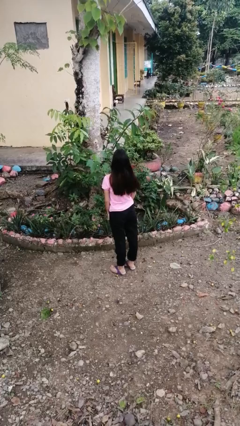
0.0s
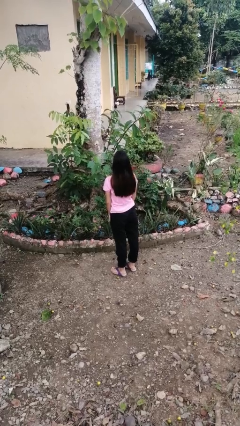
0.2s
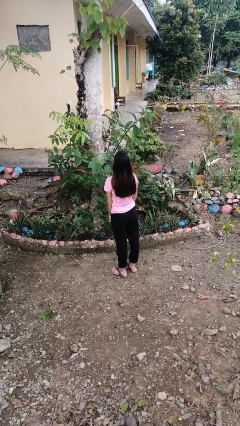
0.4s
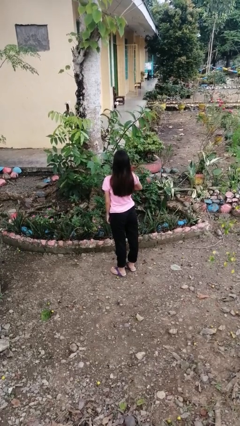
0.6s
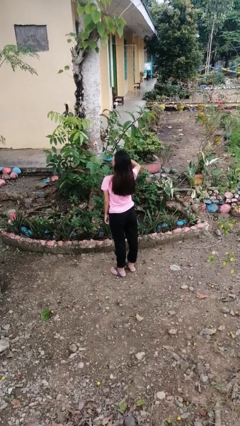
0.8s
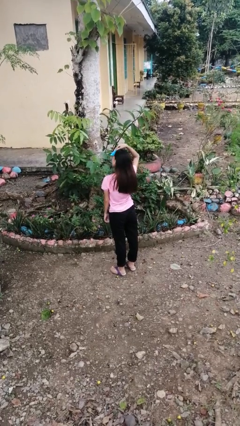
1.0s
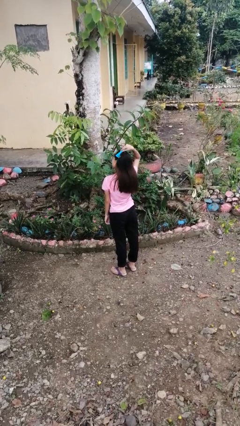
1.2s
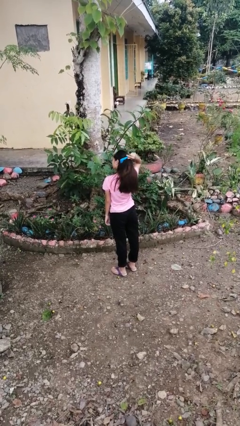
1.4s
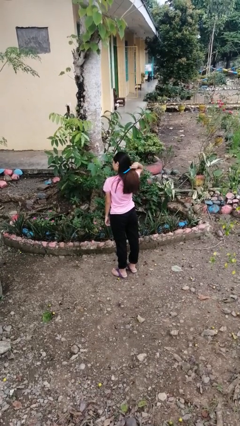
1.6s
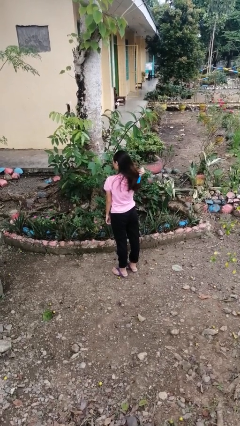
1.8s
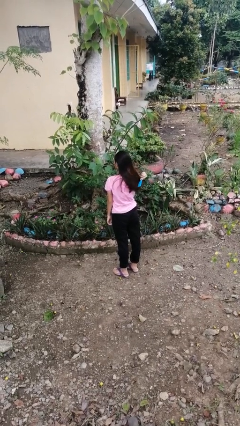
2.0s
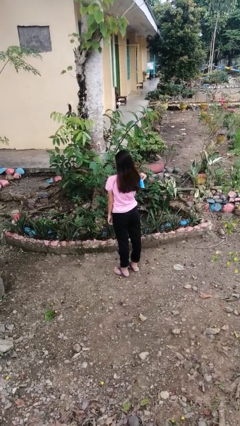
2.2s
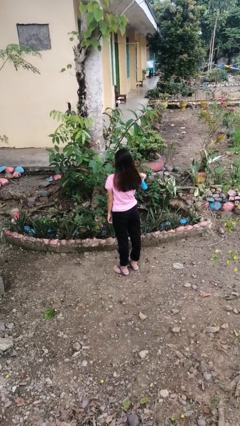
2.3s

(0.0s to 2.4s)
person brushes hair

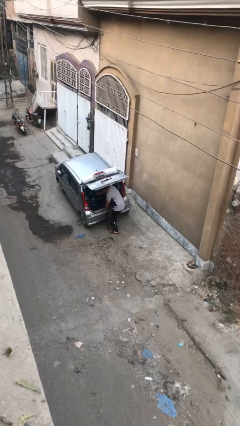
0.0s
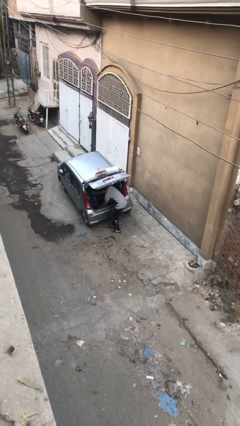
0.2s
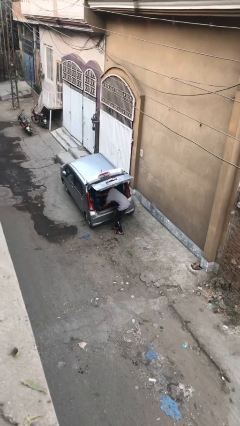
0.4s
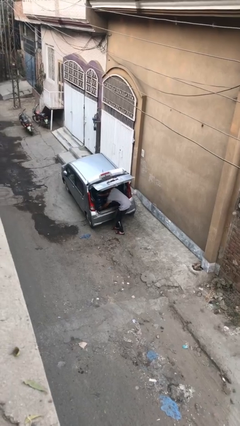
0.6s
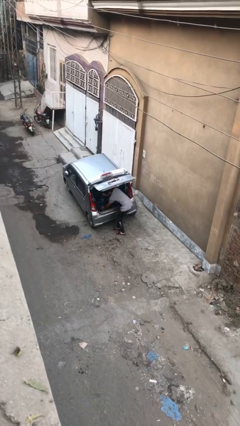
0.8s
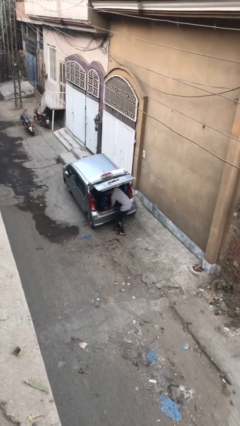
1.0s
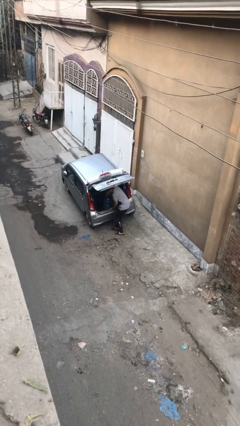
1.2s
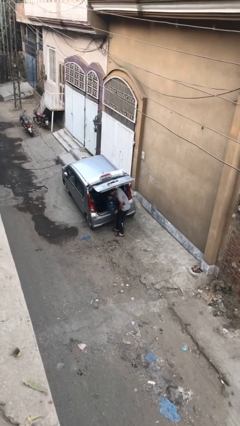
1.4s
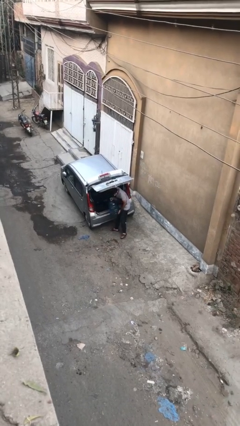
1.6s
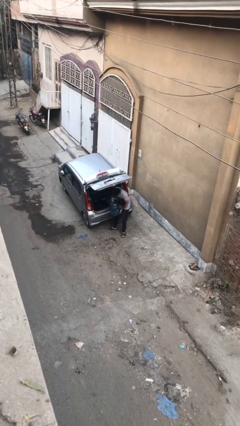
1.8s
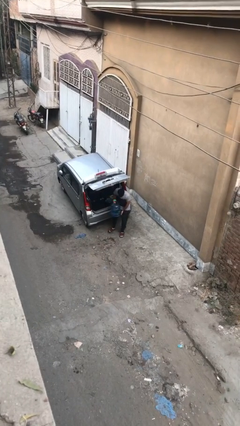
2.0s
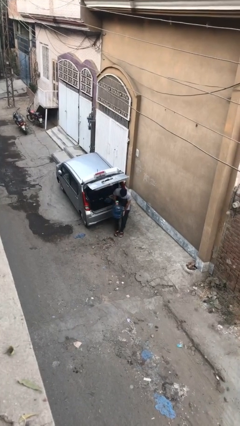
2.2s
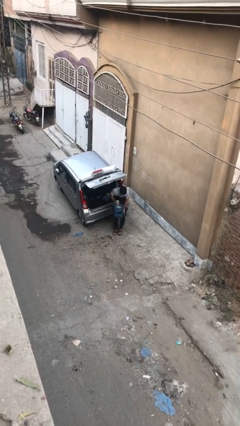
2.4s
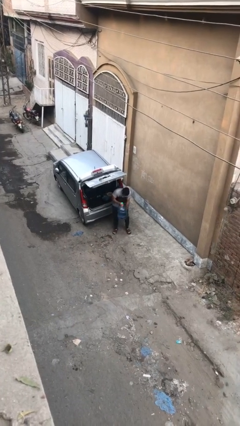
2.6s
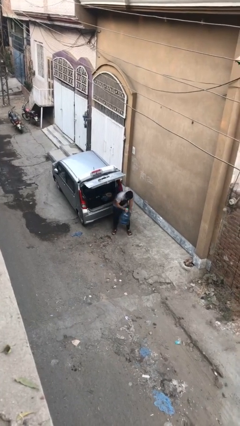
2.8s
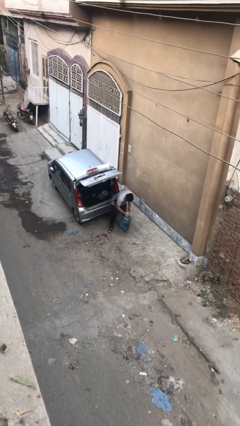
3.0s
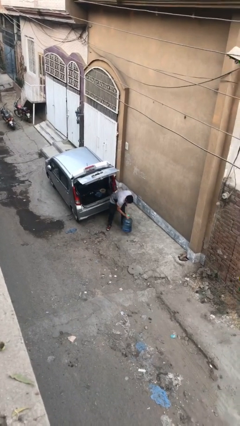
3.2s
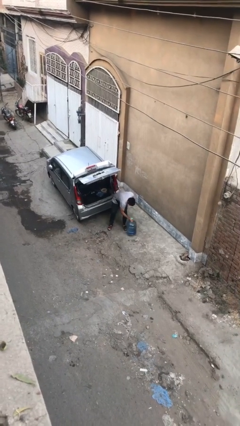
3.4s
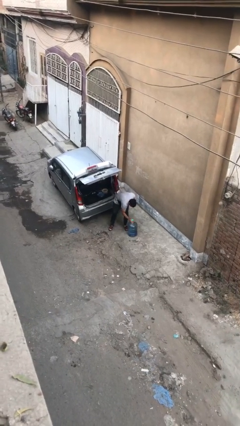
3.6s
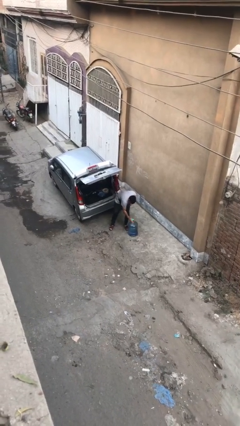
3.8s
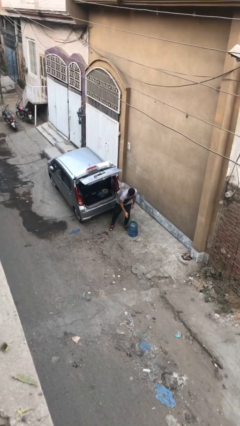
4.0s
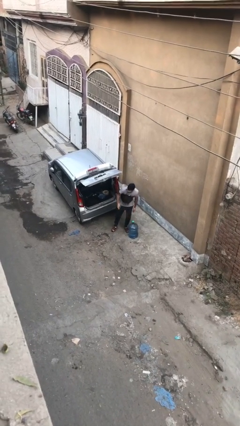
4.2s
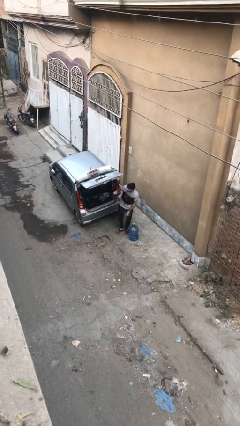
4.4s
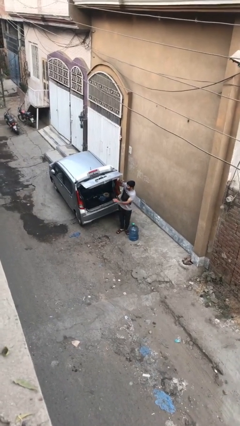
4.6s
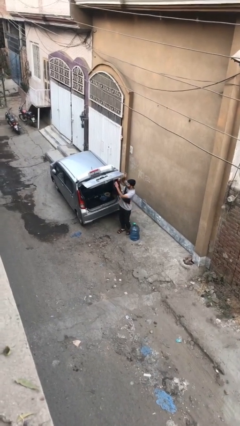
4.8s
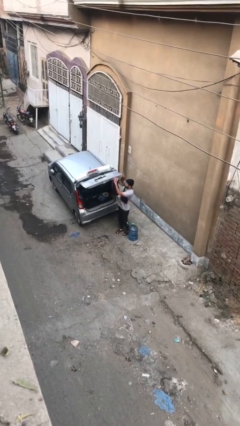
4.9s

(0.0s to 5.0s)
person unloads car

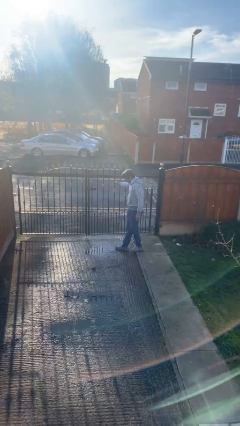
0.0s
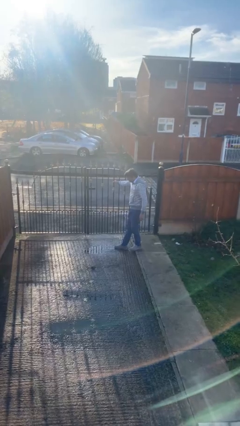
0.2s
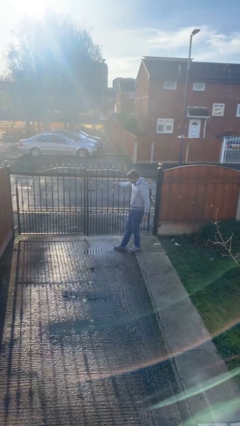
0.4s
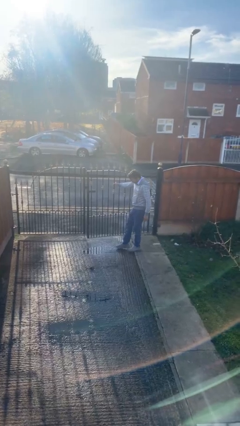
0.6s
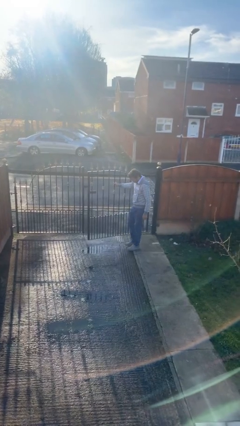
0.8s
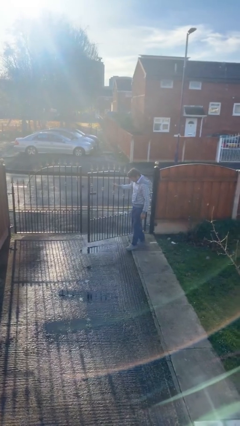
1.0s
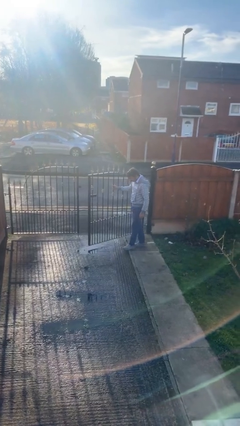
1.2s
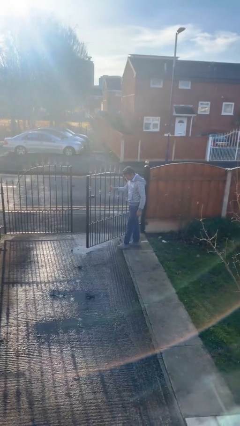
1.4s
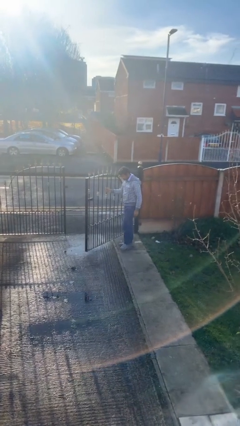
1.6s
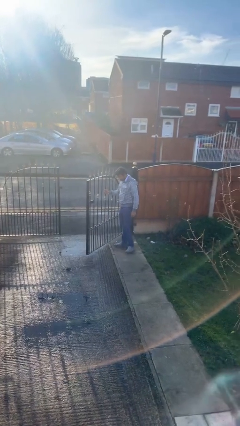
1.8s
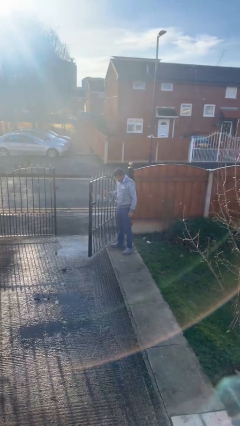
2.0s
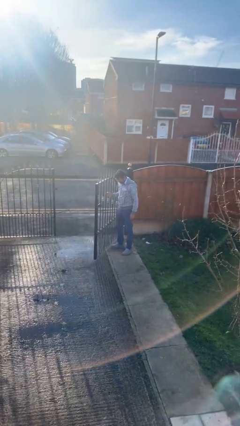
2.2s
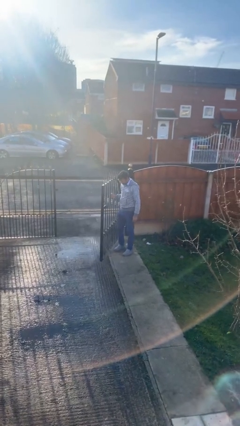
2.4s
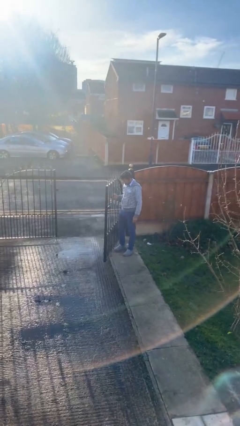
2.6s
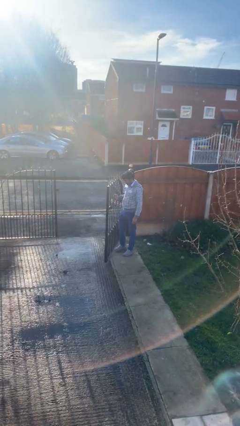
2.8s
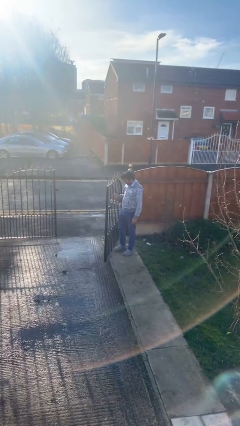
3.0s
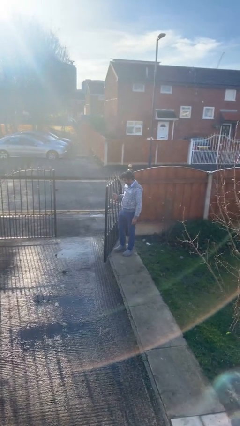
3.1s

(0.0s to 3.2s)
person opens facility door

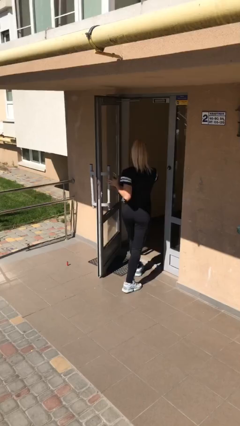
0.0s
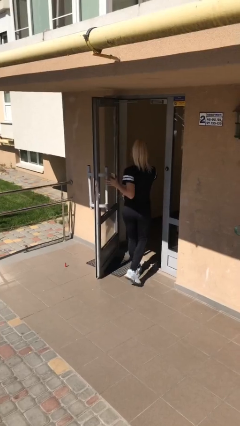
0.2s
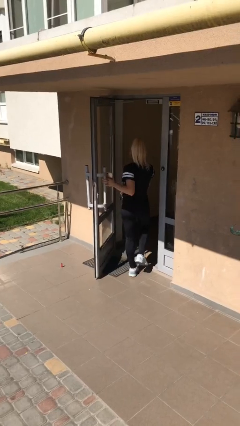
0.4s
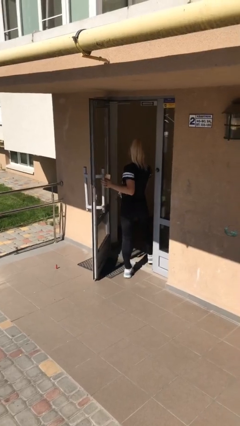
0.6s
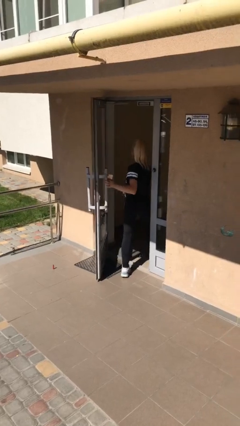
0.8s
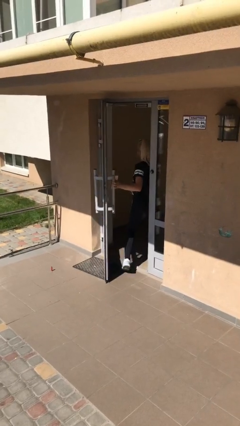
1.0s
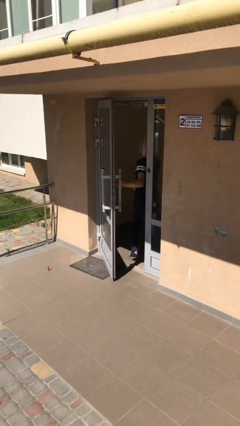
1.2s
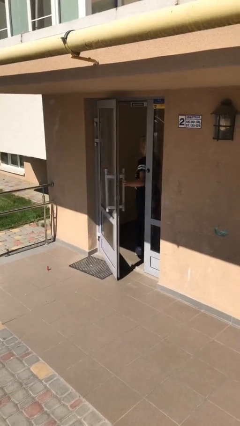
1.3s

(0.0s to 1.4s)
person exits scene through structure

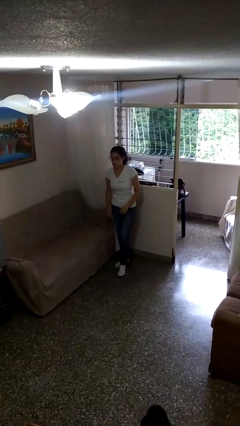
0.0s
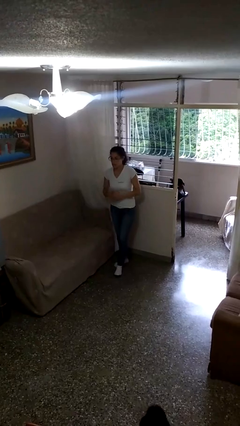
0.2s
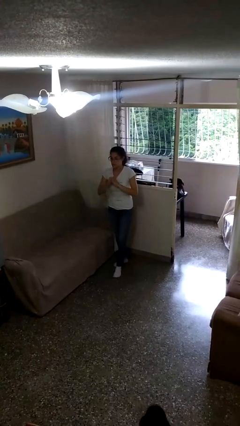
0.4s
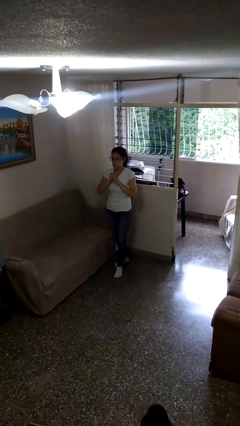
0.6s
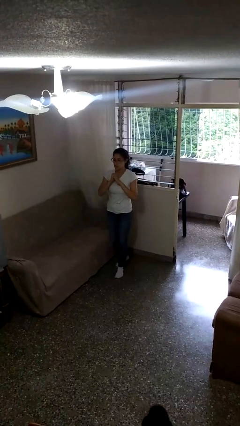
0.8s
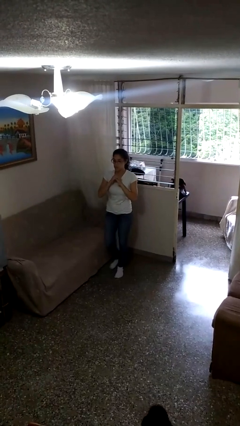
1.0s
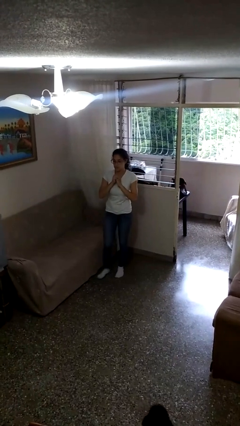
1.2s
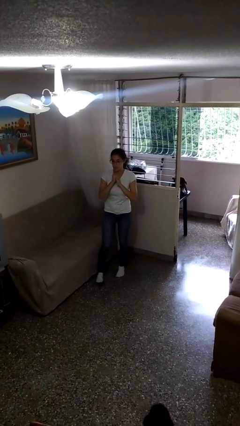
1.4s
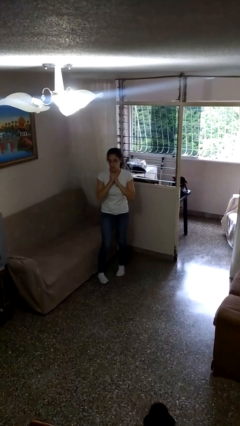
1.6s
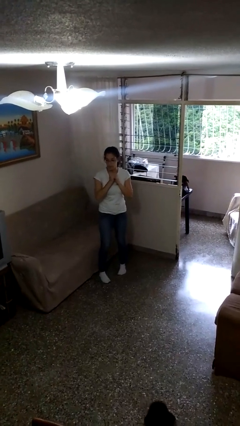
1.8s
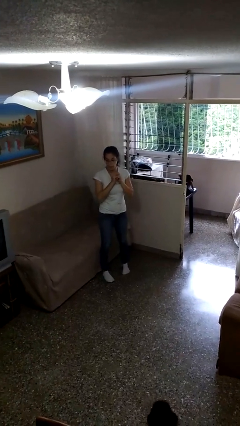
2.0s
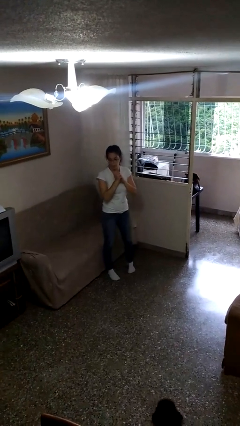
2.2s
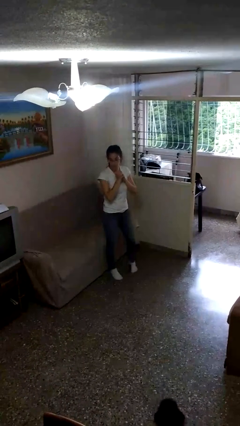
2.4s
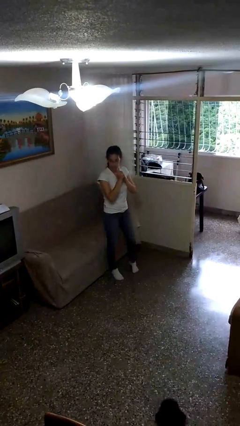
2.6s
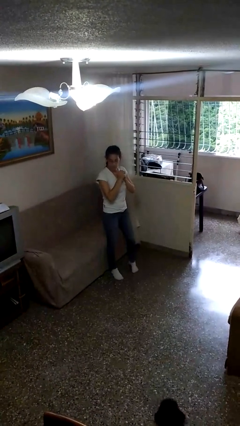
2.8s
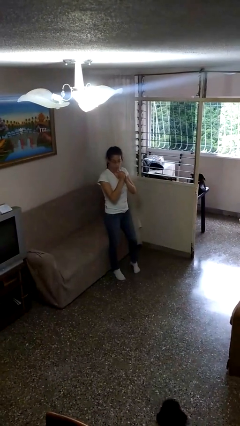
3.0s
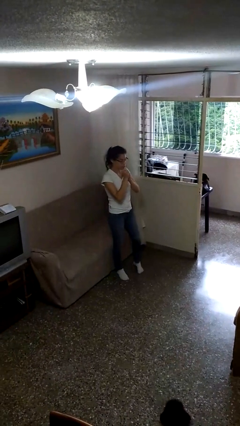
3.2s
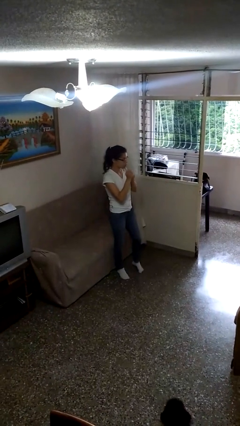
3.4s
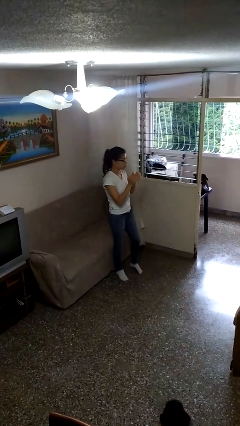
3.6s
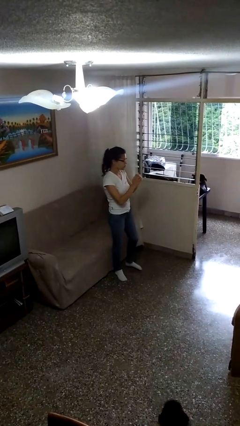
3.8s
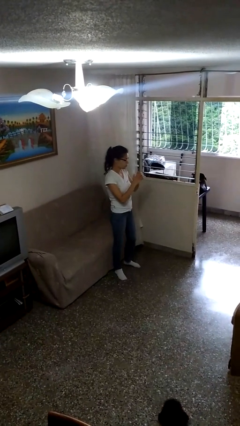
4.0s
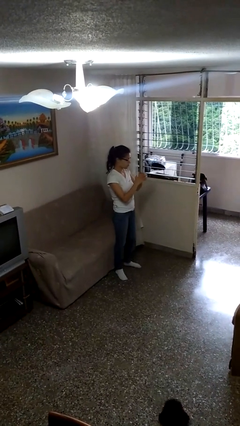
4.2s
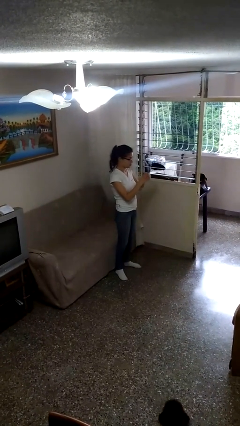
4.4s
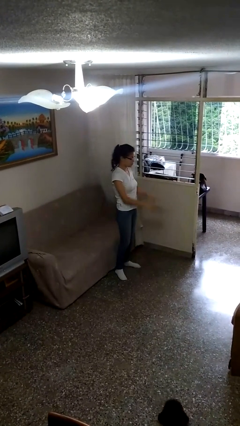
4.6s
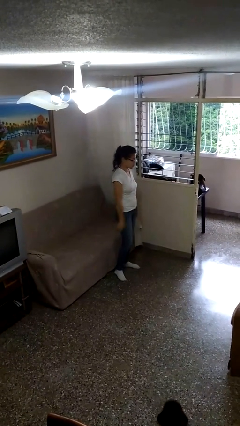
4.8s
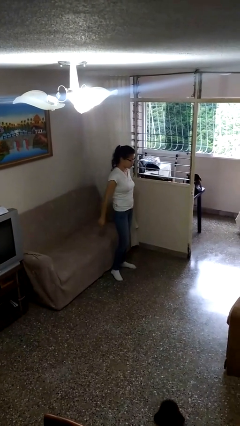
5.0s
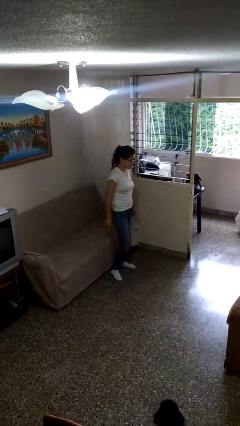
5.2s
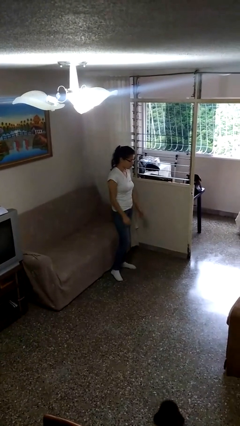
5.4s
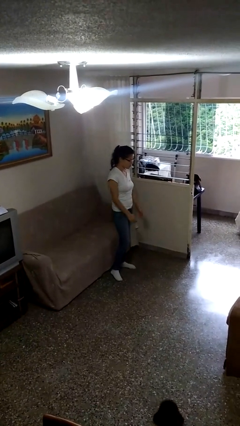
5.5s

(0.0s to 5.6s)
person cracks knuckles
